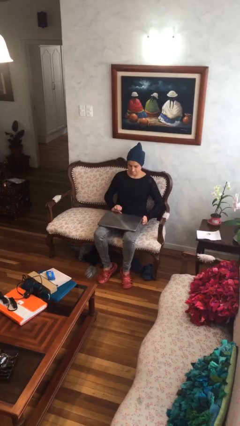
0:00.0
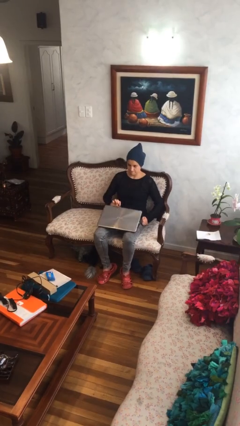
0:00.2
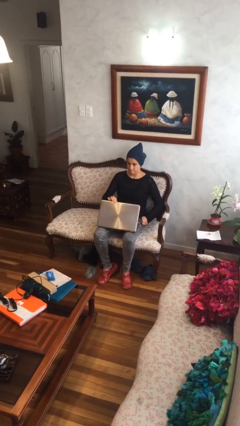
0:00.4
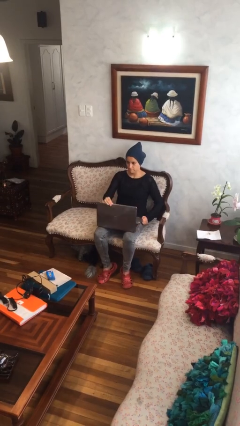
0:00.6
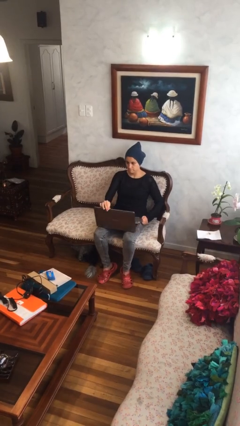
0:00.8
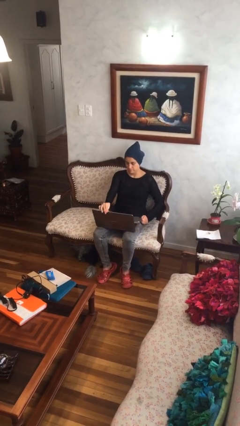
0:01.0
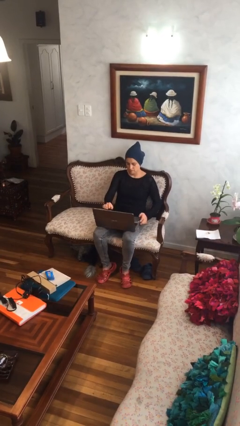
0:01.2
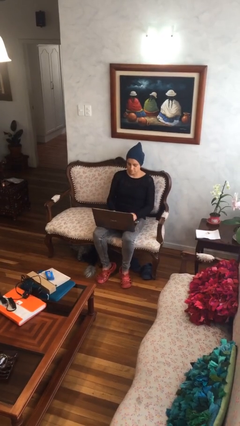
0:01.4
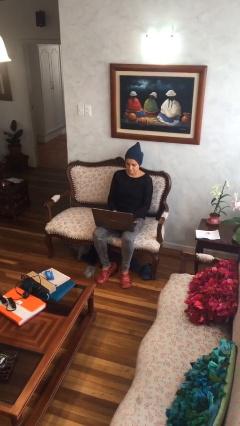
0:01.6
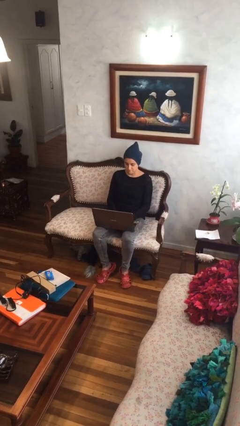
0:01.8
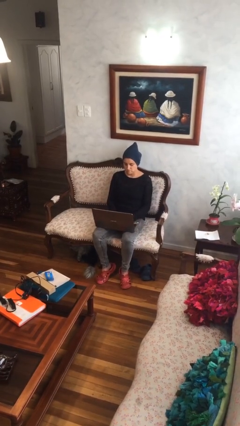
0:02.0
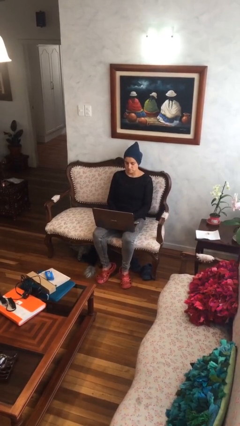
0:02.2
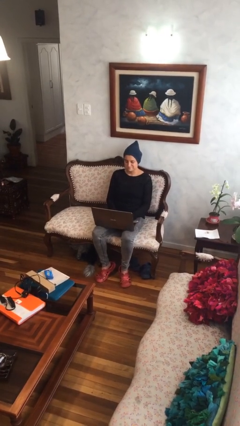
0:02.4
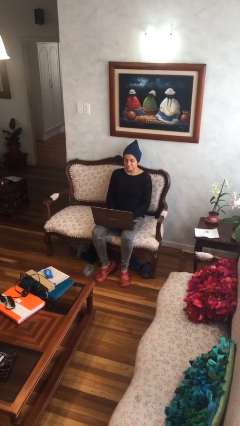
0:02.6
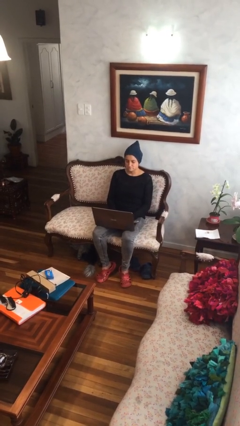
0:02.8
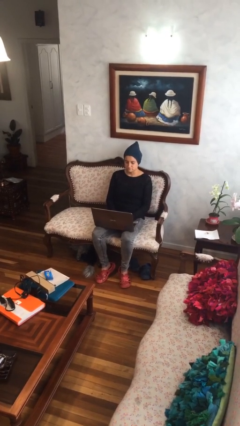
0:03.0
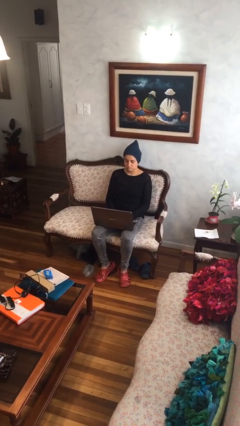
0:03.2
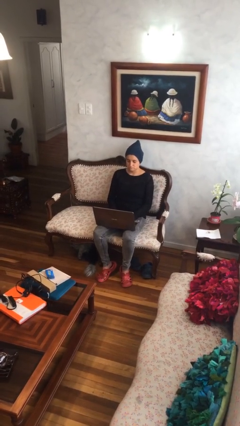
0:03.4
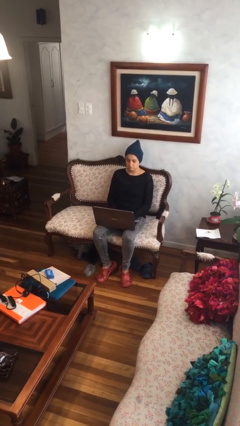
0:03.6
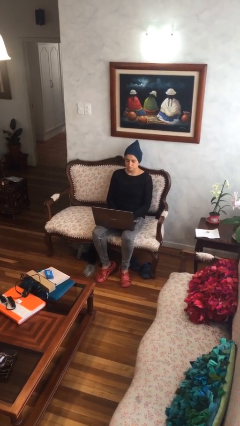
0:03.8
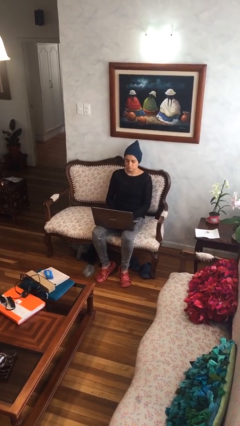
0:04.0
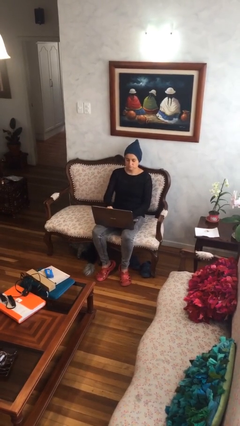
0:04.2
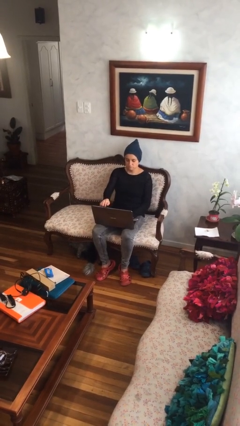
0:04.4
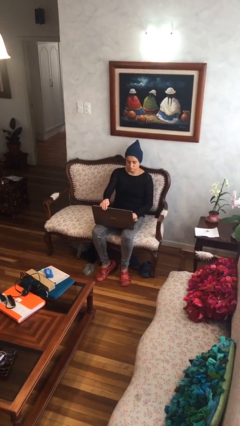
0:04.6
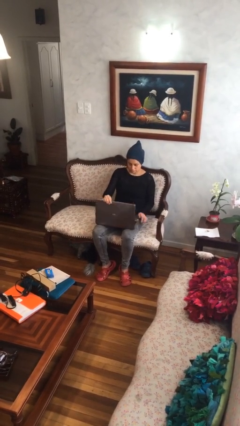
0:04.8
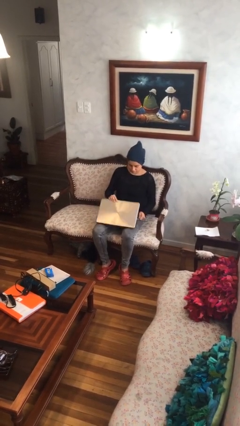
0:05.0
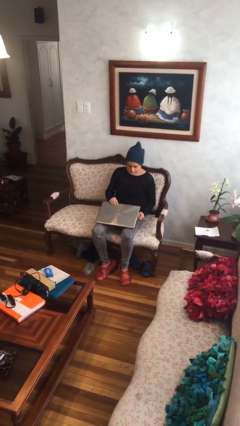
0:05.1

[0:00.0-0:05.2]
person interacts with laptop

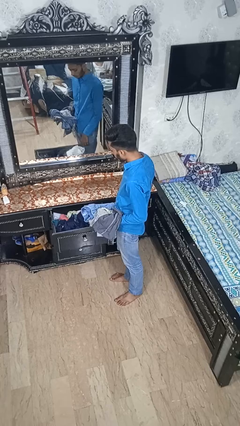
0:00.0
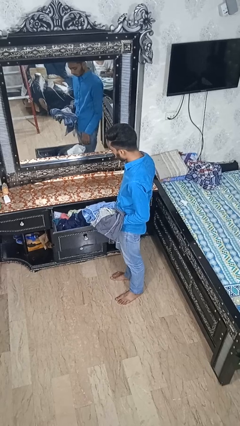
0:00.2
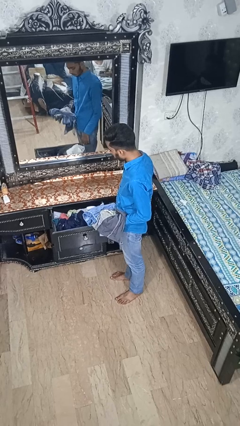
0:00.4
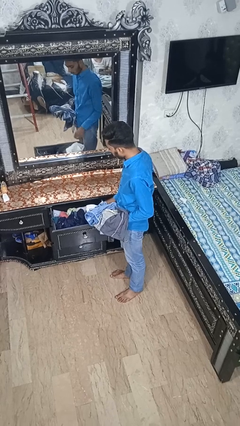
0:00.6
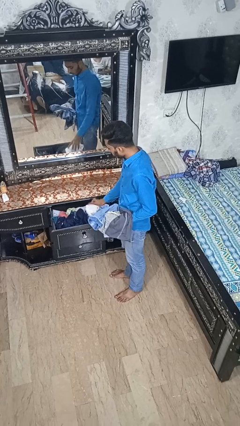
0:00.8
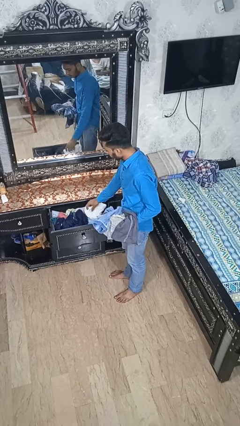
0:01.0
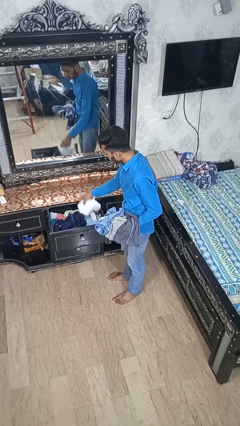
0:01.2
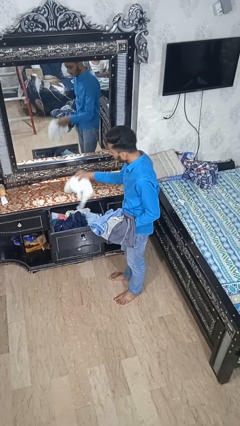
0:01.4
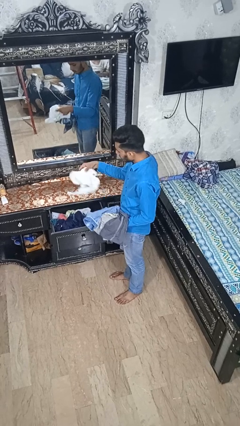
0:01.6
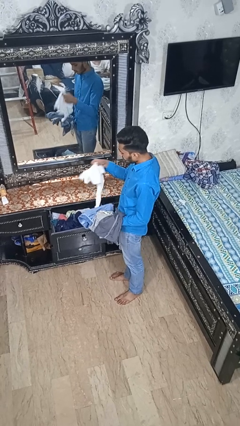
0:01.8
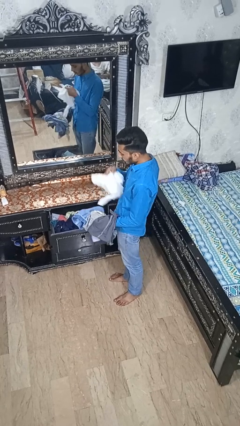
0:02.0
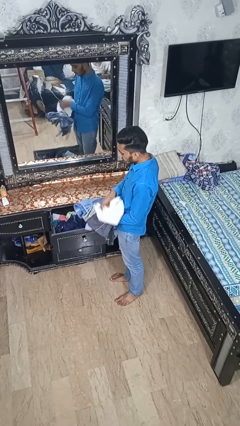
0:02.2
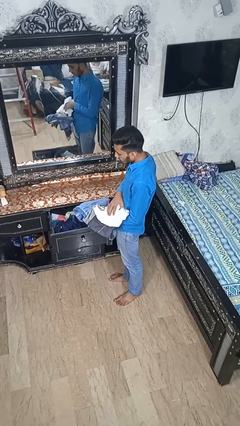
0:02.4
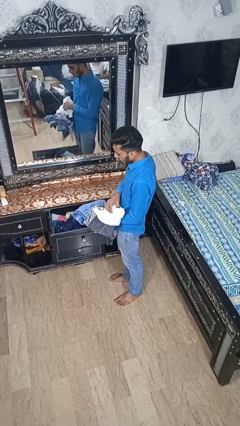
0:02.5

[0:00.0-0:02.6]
person takes clothes from dresser

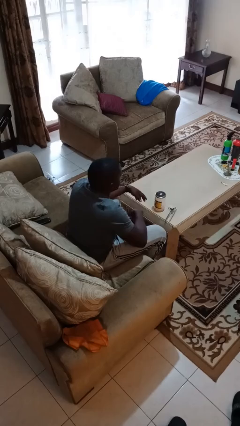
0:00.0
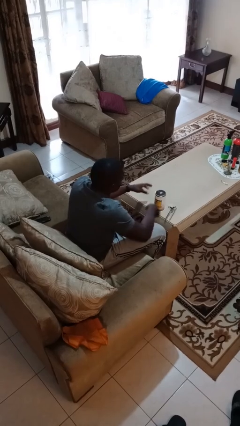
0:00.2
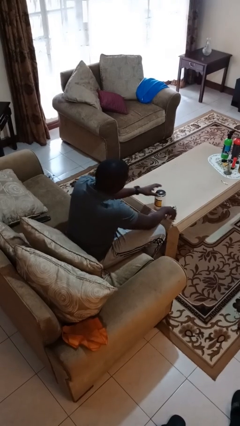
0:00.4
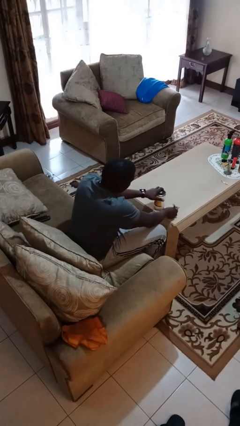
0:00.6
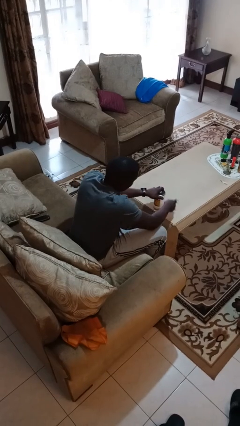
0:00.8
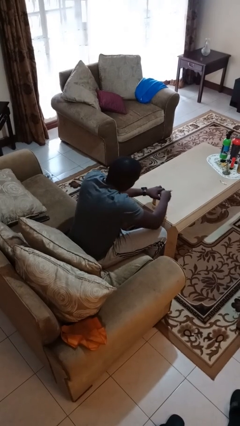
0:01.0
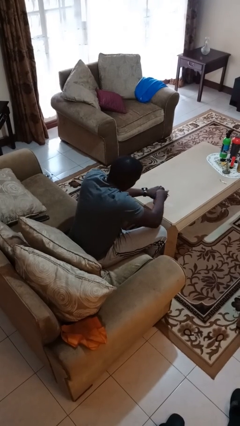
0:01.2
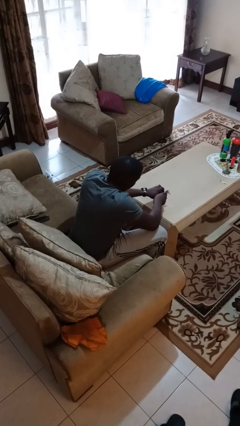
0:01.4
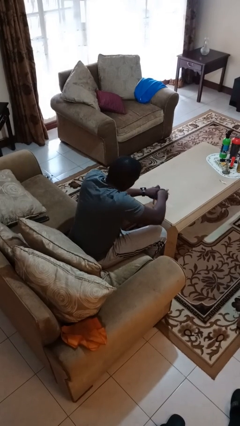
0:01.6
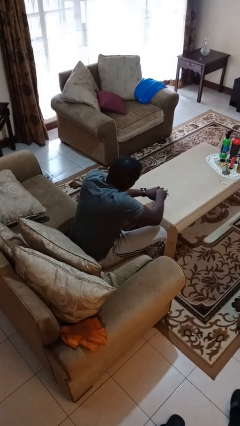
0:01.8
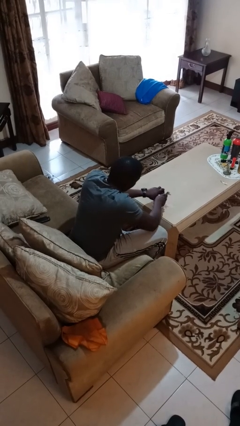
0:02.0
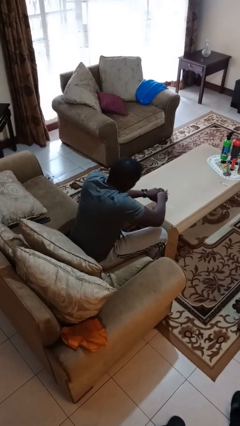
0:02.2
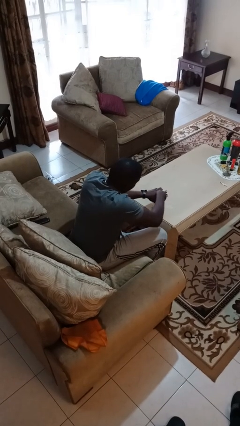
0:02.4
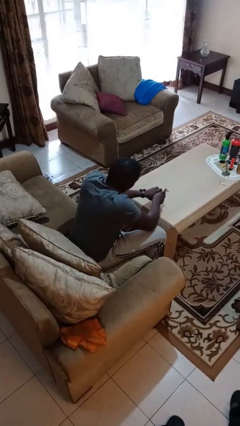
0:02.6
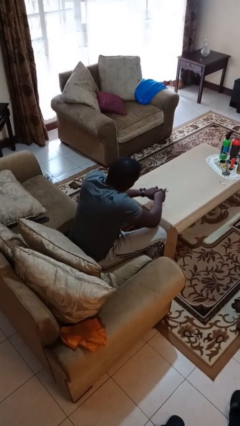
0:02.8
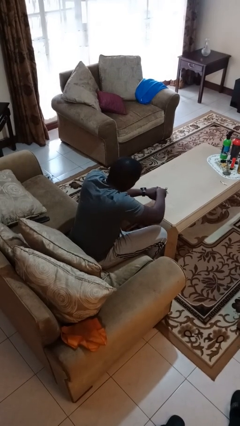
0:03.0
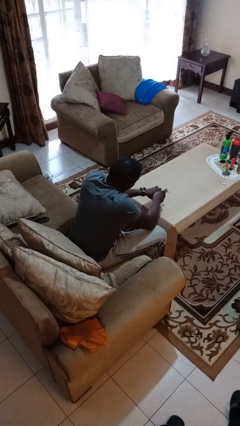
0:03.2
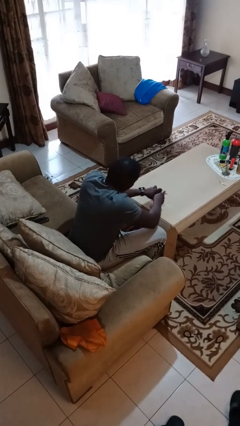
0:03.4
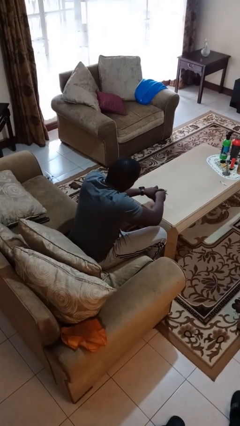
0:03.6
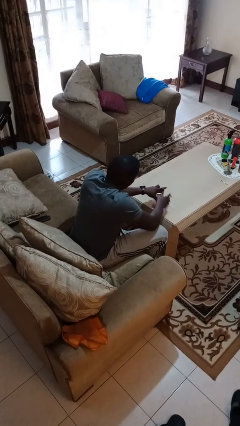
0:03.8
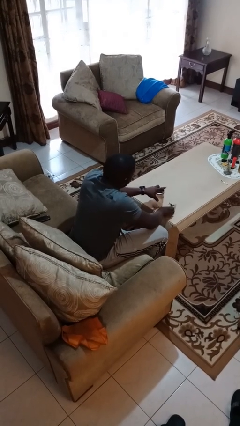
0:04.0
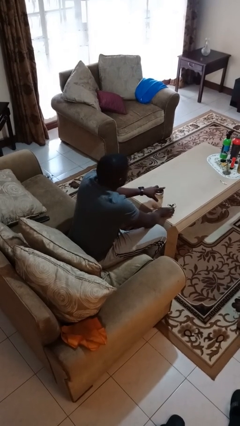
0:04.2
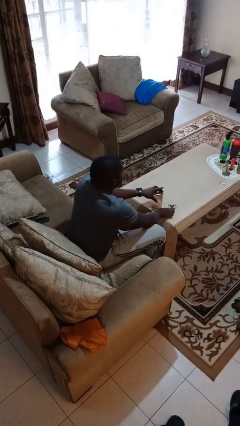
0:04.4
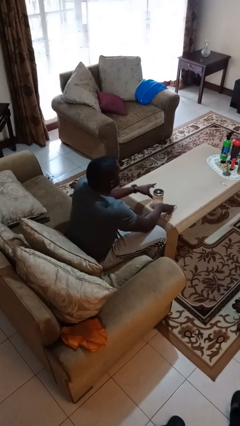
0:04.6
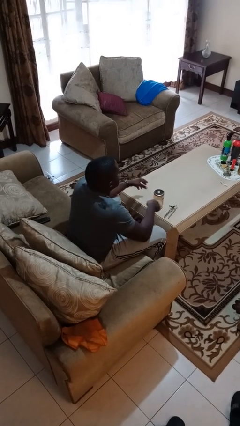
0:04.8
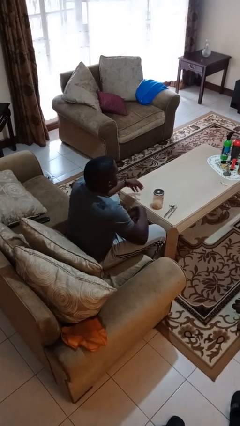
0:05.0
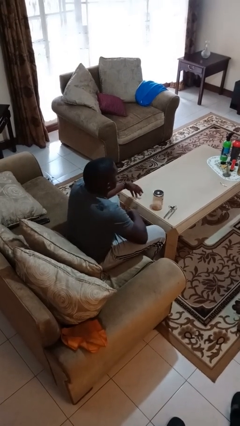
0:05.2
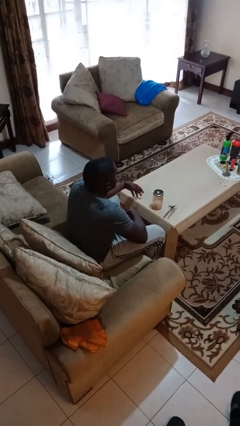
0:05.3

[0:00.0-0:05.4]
person opens can with can opener

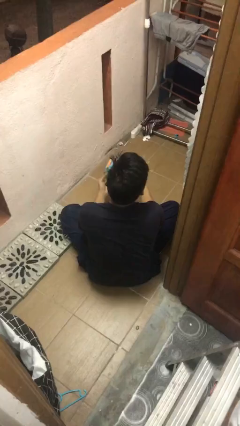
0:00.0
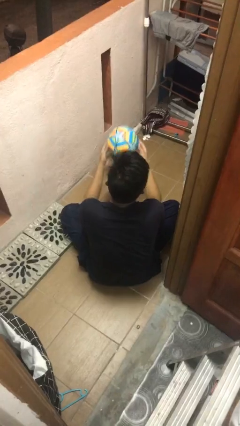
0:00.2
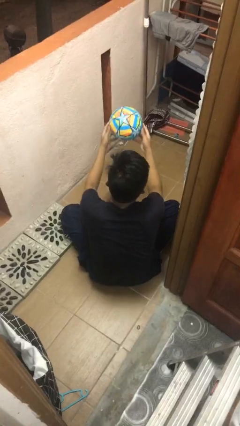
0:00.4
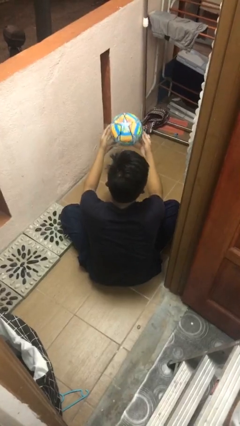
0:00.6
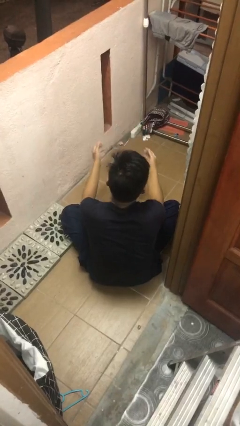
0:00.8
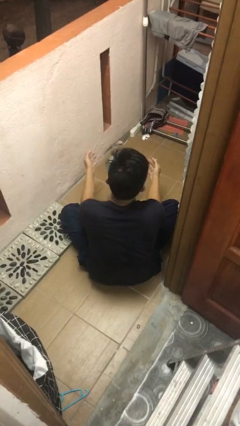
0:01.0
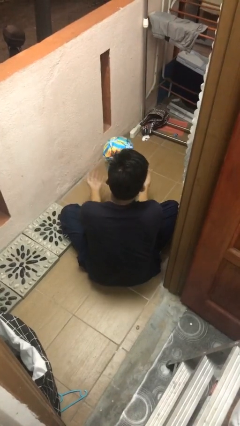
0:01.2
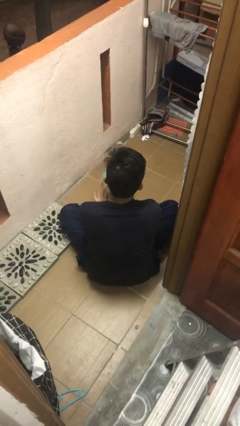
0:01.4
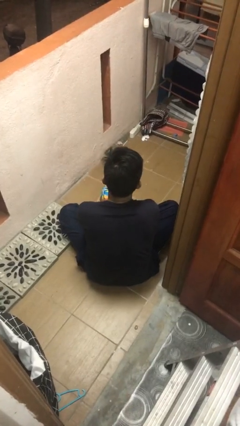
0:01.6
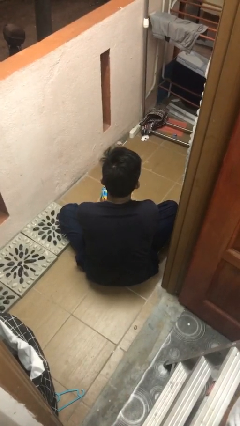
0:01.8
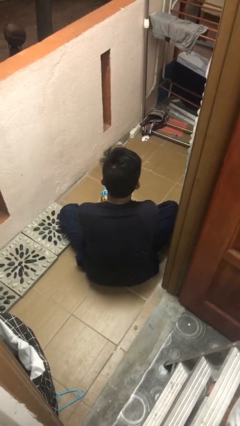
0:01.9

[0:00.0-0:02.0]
person bounces ball on floor

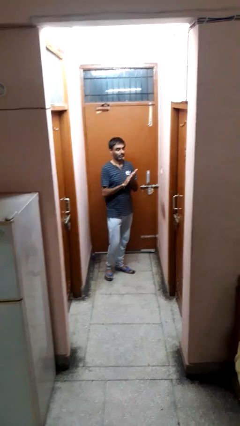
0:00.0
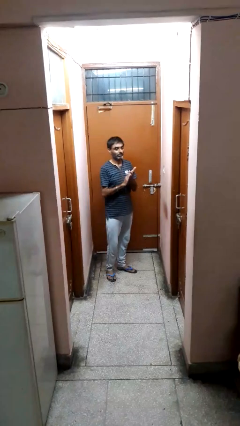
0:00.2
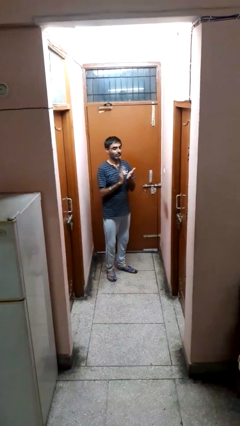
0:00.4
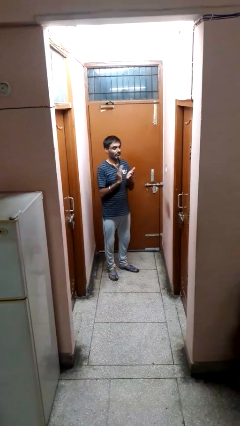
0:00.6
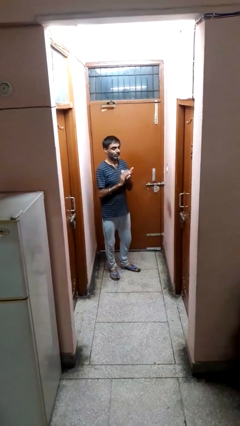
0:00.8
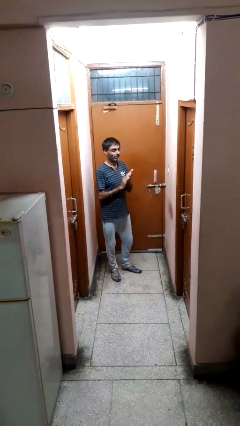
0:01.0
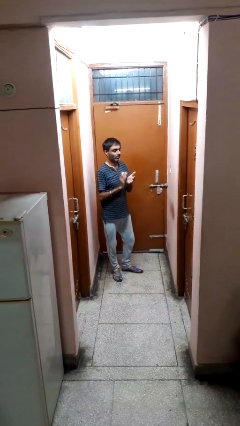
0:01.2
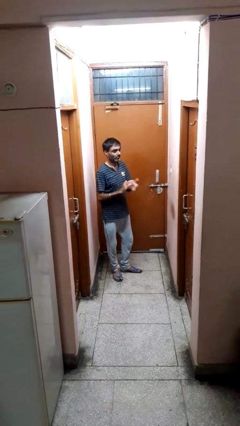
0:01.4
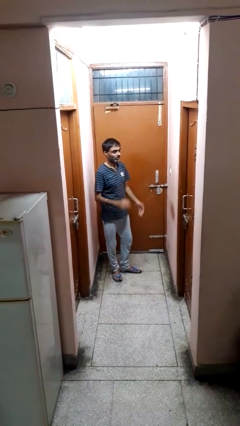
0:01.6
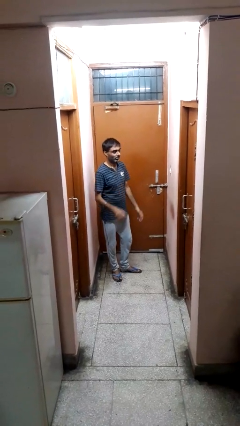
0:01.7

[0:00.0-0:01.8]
person claps hands

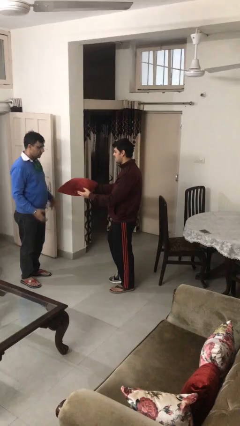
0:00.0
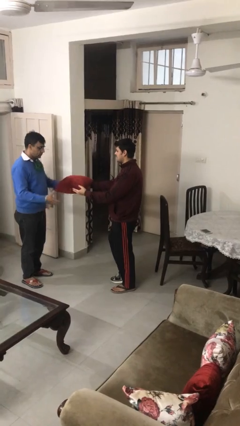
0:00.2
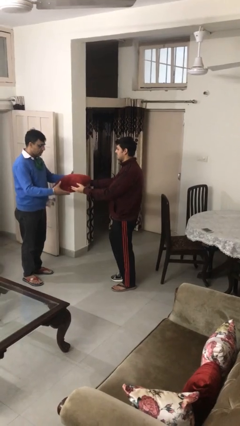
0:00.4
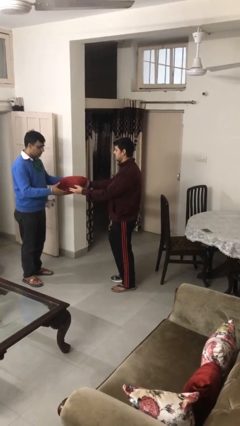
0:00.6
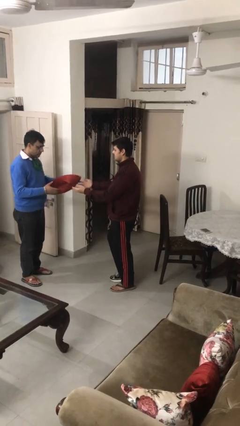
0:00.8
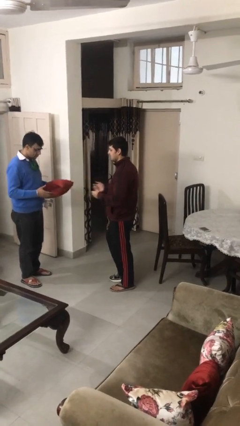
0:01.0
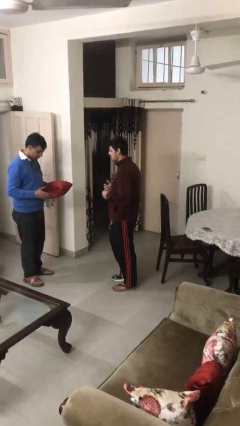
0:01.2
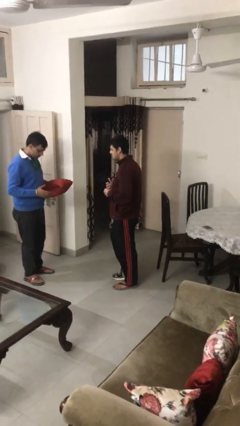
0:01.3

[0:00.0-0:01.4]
person transfers object to person
